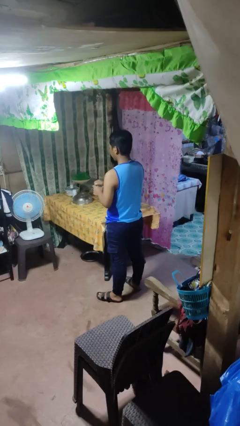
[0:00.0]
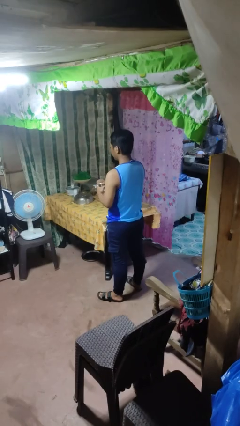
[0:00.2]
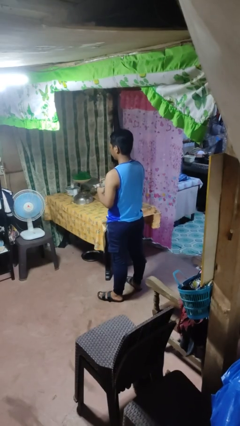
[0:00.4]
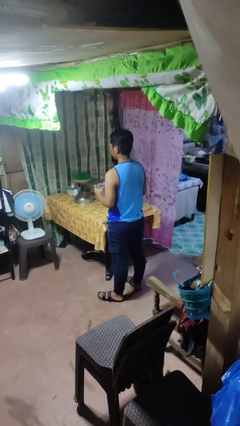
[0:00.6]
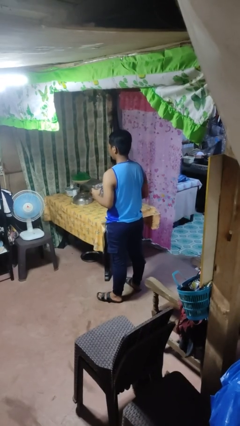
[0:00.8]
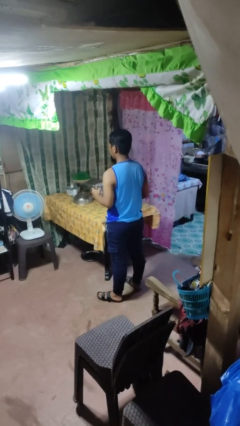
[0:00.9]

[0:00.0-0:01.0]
person opens jar

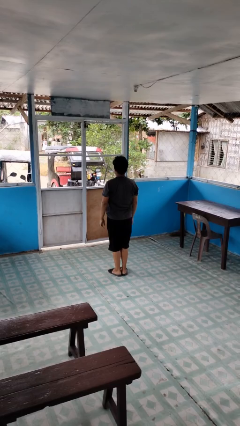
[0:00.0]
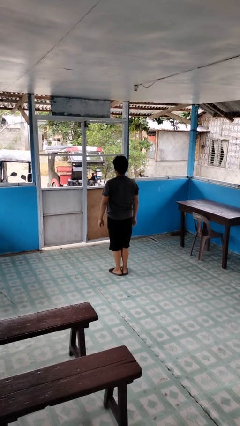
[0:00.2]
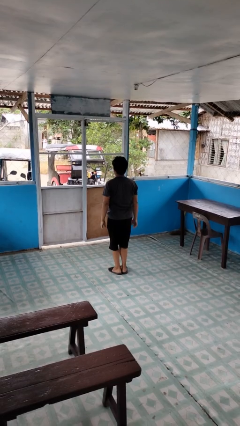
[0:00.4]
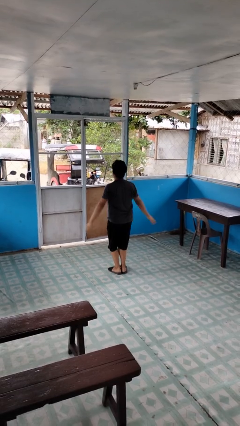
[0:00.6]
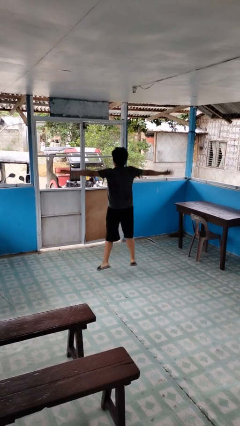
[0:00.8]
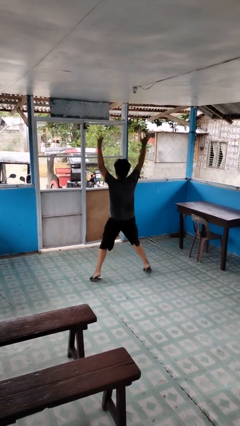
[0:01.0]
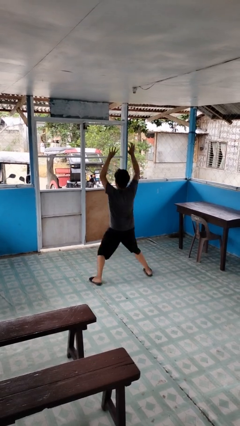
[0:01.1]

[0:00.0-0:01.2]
person exercises with jumping jacks

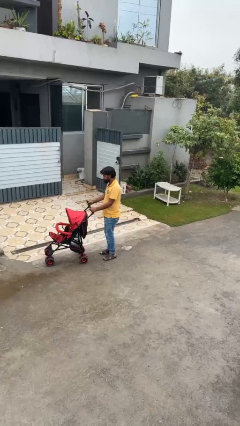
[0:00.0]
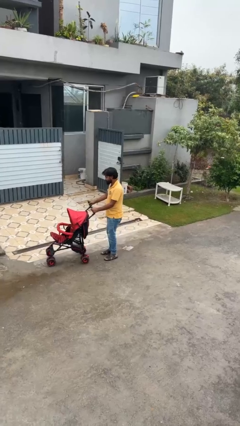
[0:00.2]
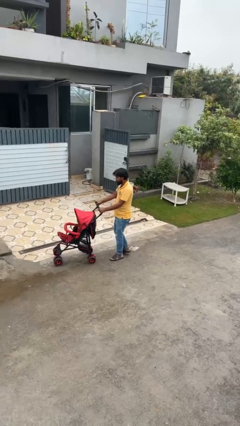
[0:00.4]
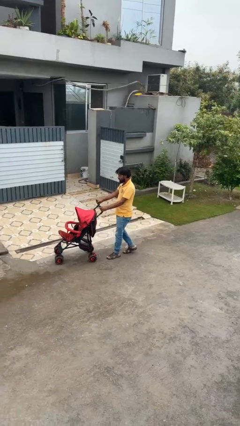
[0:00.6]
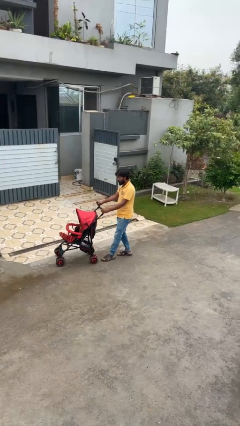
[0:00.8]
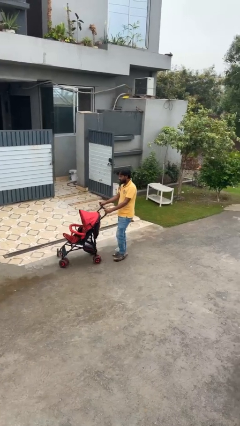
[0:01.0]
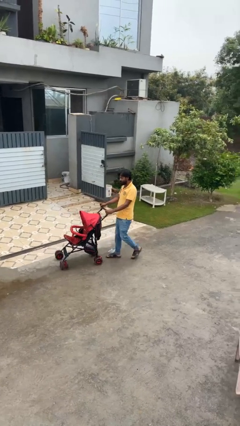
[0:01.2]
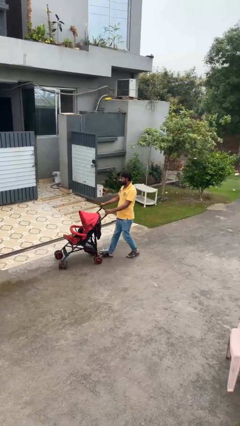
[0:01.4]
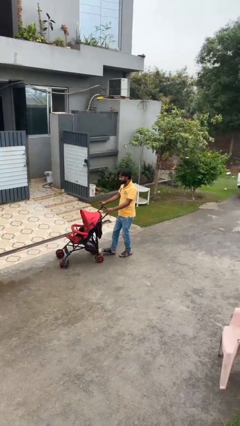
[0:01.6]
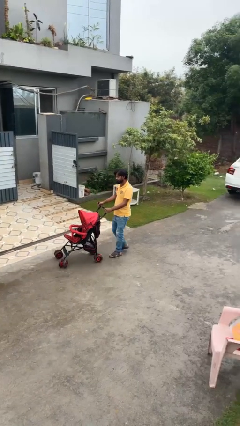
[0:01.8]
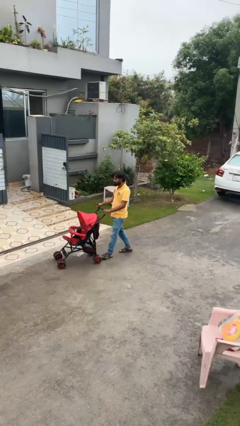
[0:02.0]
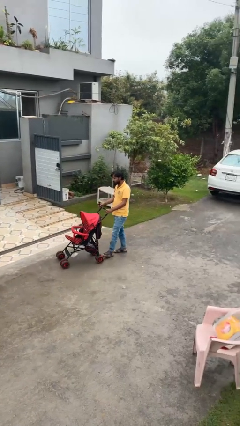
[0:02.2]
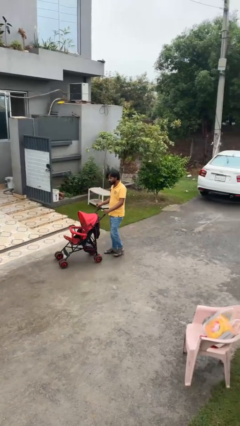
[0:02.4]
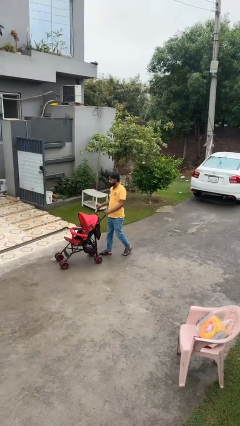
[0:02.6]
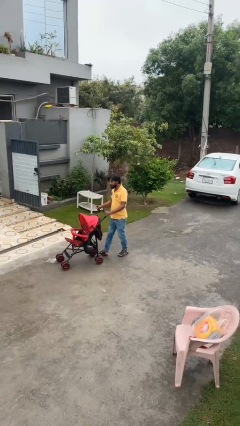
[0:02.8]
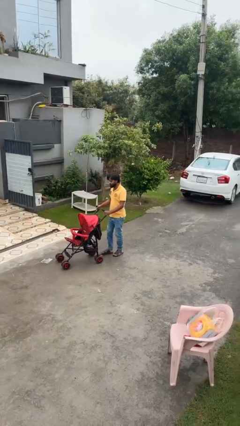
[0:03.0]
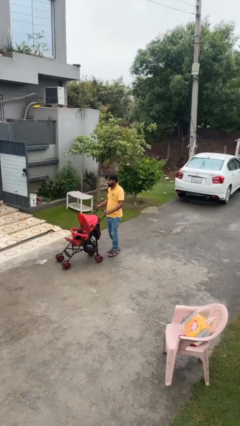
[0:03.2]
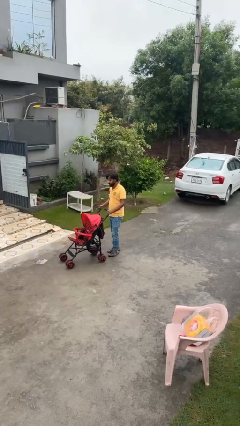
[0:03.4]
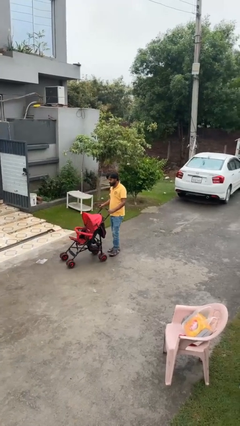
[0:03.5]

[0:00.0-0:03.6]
person pulls wheeled cart

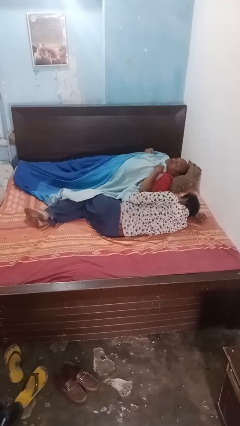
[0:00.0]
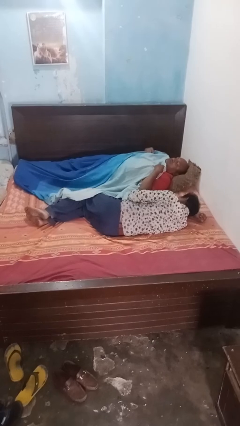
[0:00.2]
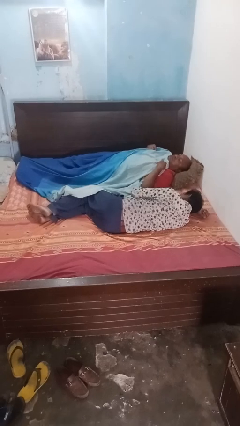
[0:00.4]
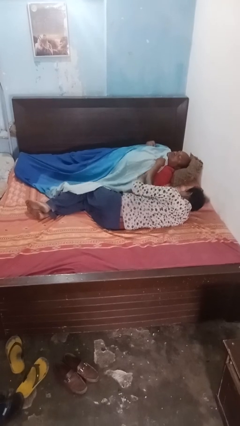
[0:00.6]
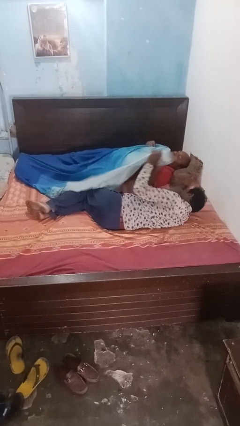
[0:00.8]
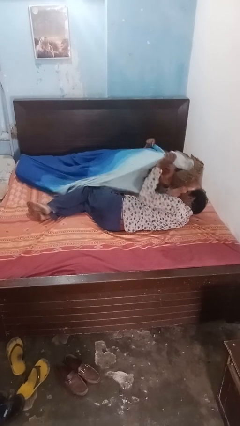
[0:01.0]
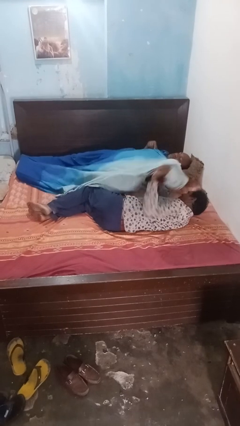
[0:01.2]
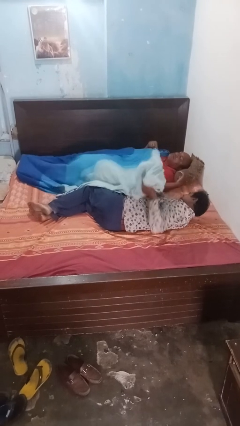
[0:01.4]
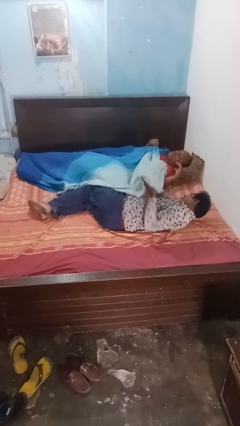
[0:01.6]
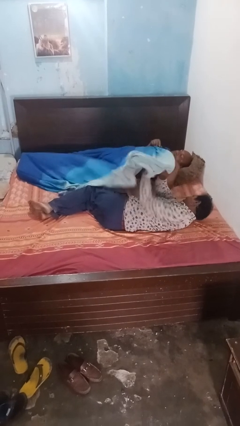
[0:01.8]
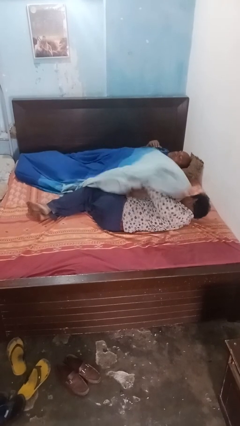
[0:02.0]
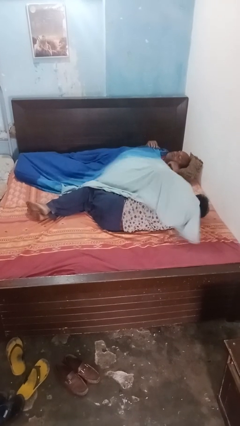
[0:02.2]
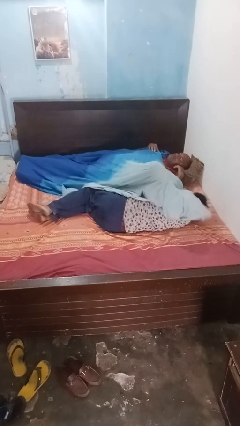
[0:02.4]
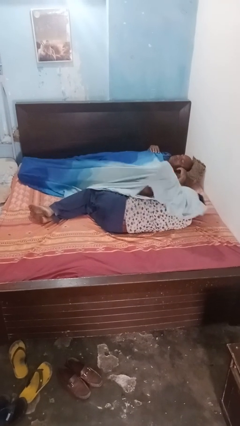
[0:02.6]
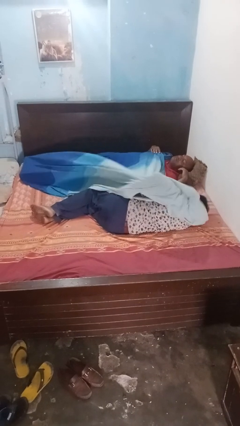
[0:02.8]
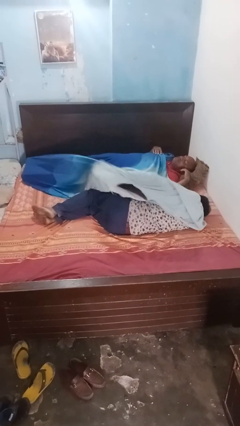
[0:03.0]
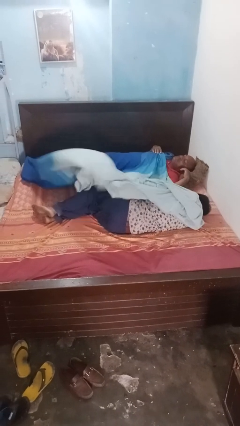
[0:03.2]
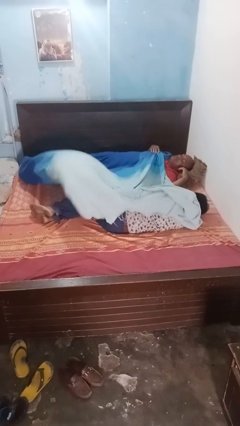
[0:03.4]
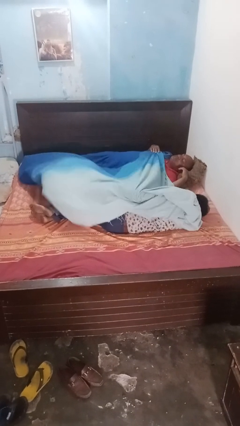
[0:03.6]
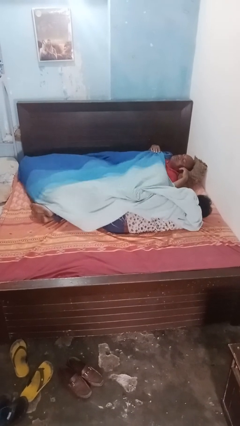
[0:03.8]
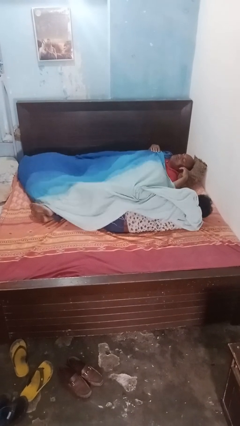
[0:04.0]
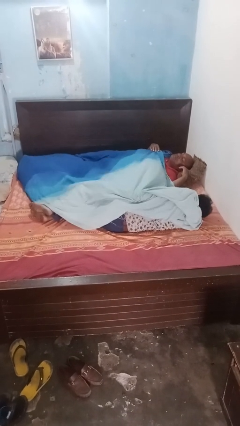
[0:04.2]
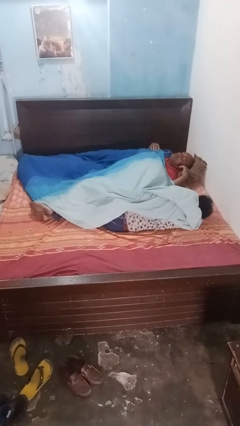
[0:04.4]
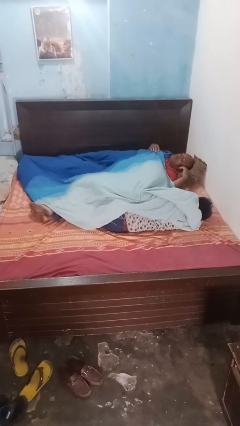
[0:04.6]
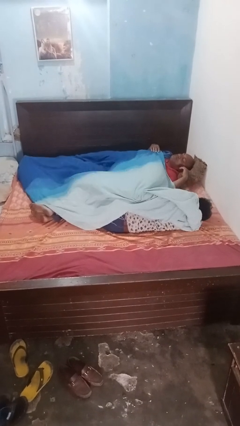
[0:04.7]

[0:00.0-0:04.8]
person covers friend with blanket

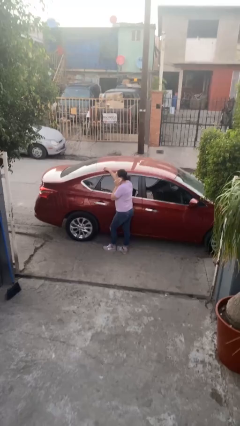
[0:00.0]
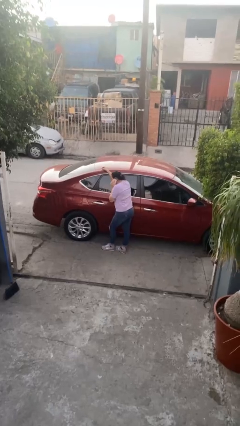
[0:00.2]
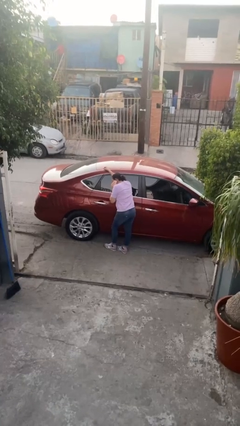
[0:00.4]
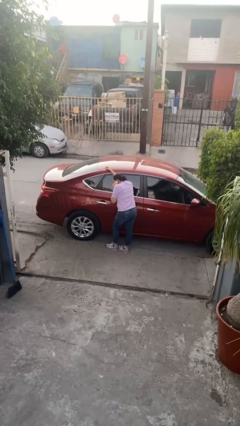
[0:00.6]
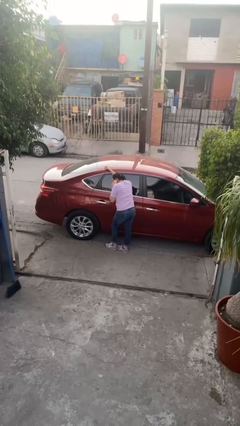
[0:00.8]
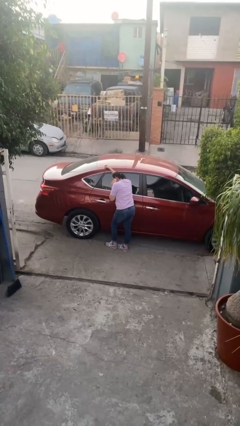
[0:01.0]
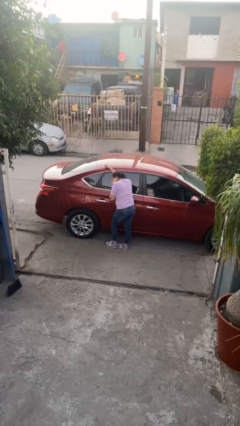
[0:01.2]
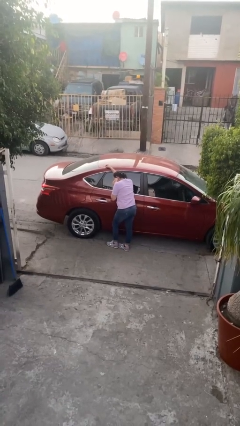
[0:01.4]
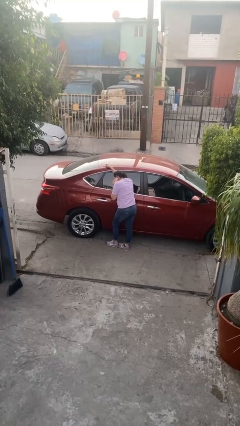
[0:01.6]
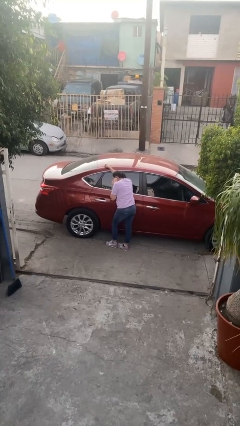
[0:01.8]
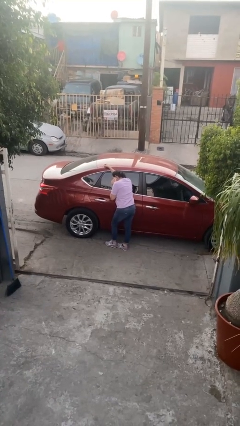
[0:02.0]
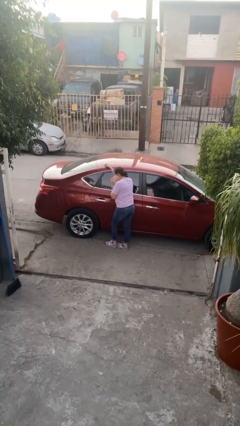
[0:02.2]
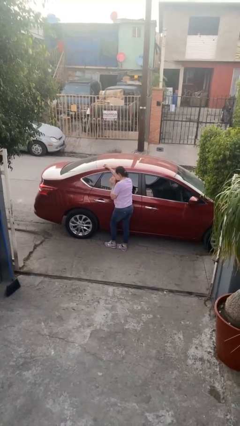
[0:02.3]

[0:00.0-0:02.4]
person leans against car

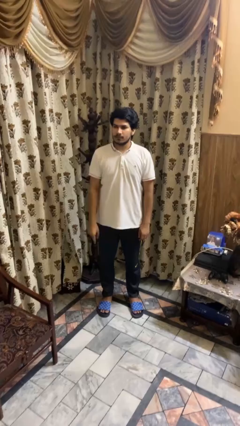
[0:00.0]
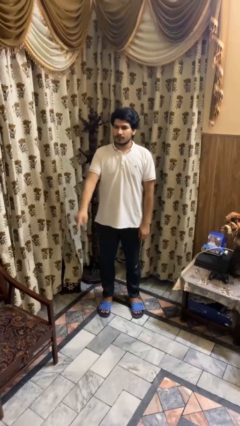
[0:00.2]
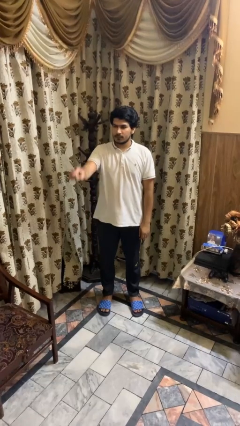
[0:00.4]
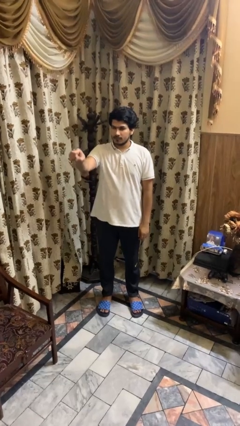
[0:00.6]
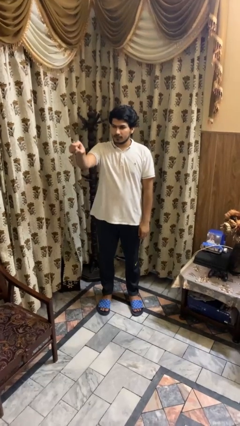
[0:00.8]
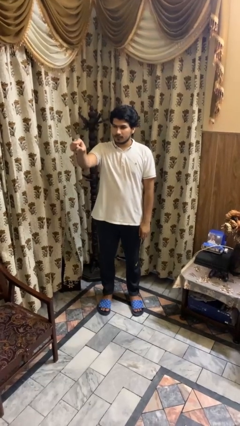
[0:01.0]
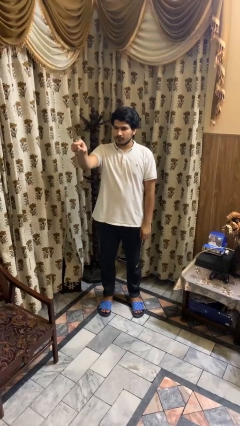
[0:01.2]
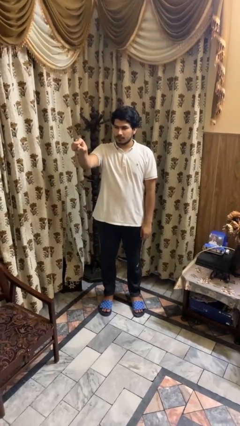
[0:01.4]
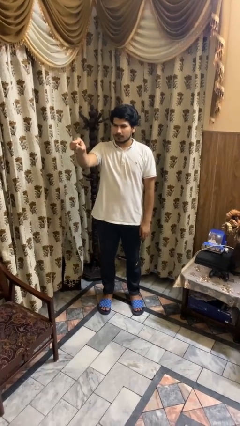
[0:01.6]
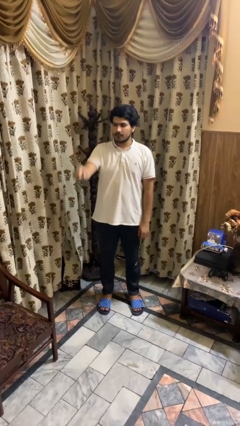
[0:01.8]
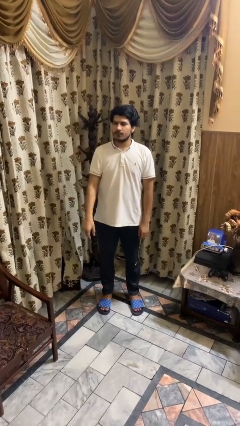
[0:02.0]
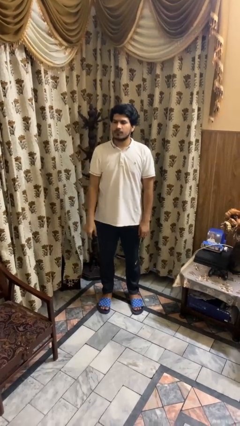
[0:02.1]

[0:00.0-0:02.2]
person points at person

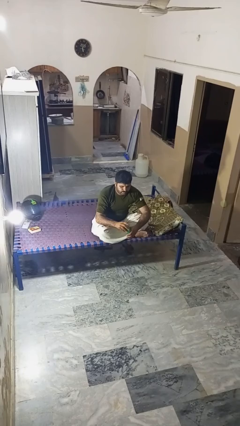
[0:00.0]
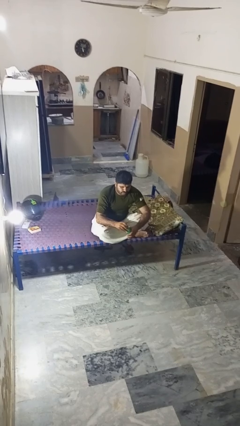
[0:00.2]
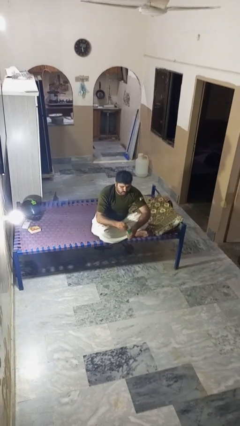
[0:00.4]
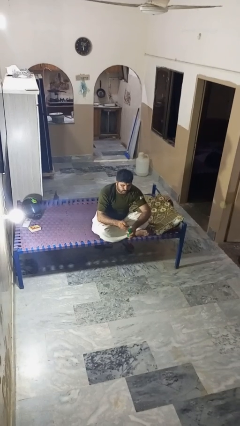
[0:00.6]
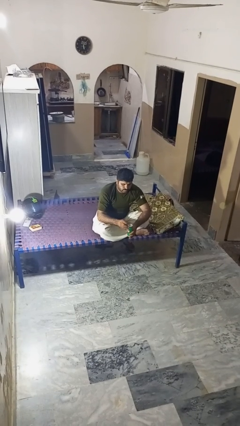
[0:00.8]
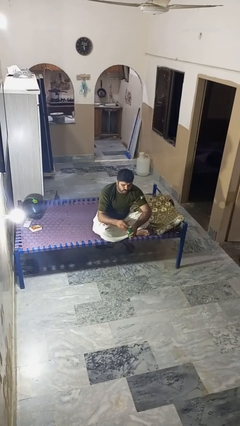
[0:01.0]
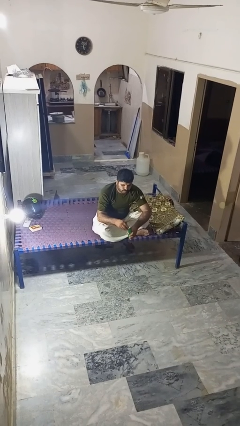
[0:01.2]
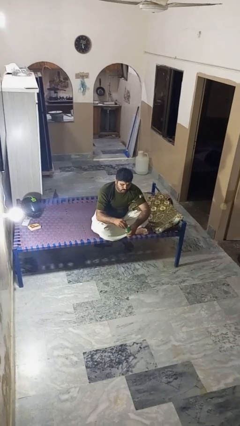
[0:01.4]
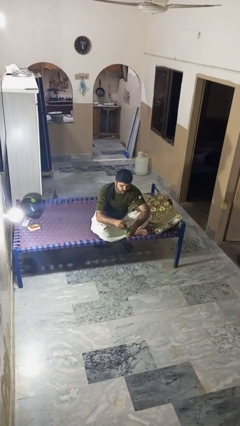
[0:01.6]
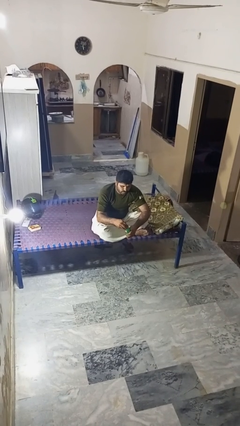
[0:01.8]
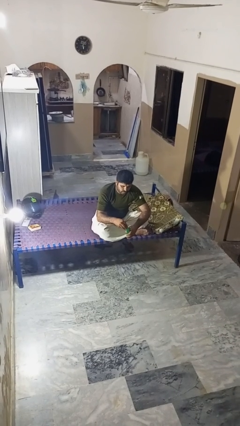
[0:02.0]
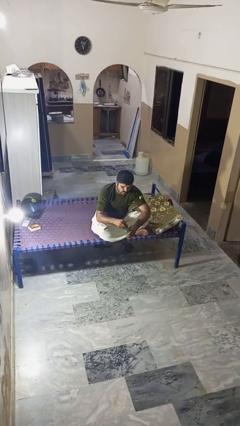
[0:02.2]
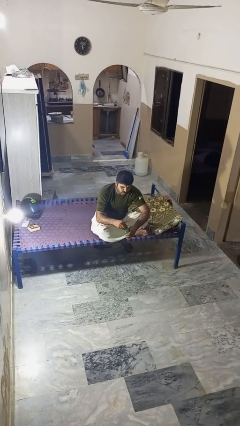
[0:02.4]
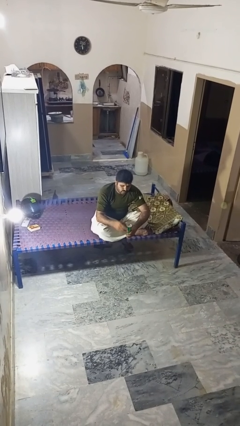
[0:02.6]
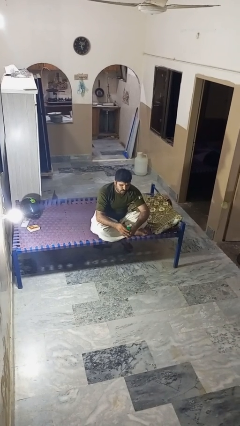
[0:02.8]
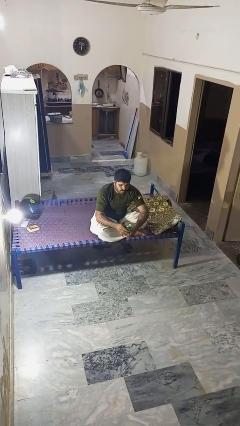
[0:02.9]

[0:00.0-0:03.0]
person opens beverage can
